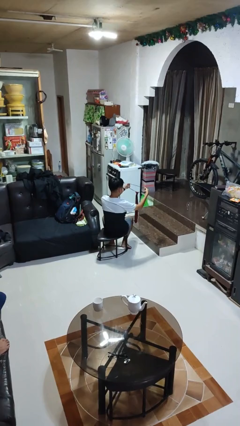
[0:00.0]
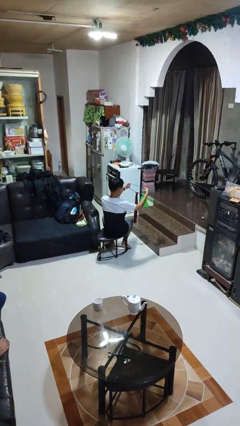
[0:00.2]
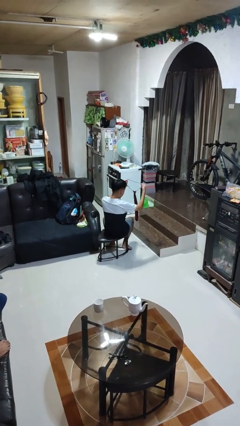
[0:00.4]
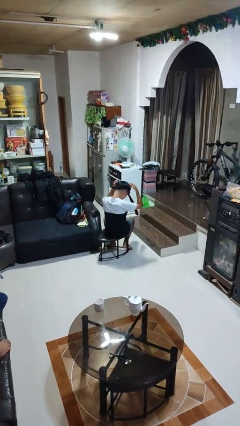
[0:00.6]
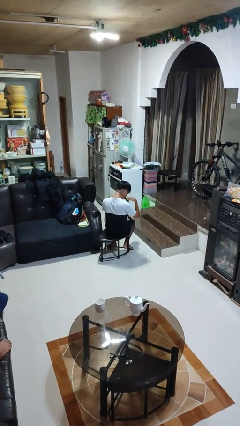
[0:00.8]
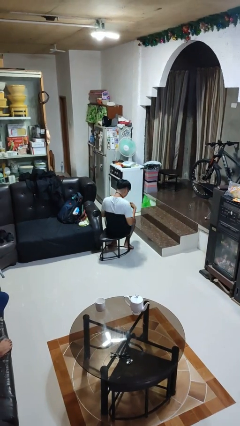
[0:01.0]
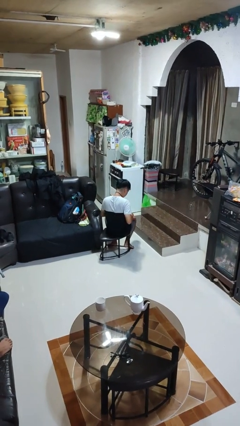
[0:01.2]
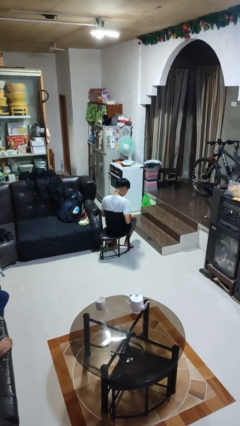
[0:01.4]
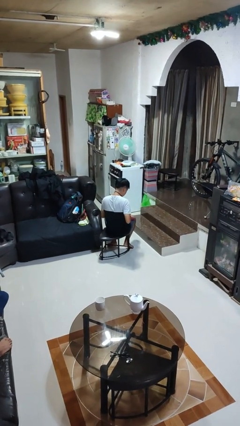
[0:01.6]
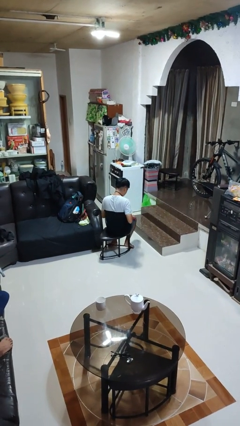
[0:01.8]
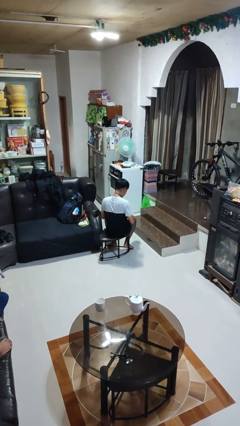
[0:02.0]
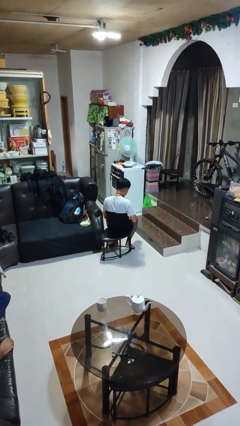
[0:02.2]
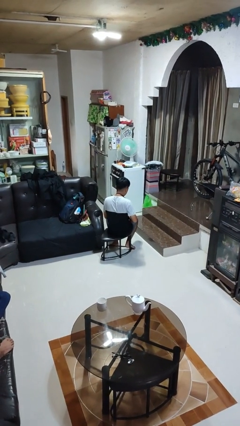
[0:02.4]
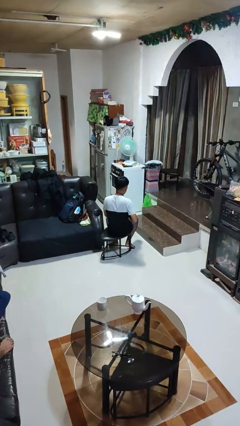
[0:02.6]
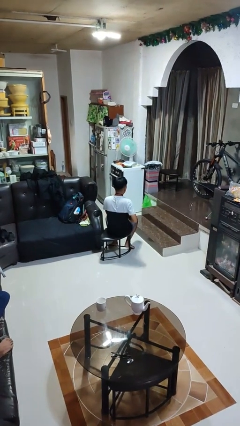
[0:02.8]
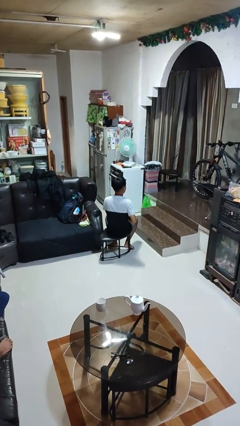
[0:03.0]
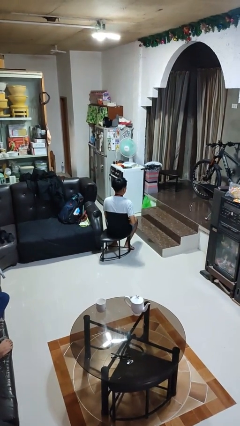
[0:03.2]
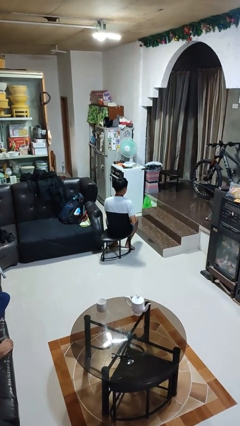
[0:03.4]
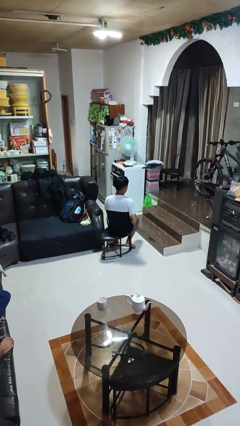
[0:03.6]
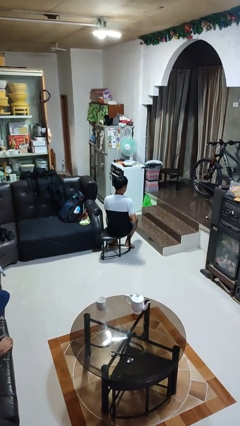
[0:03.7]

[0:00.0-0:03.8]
person puts on necktie

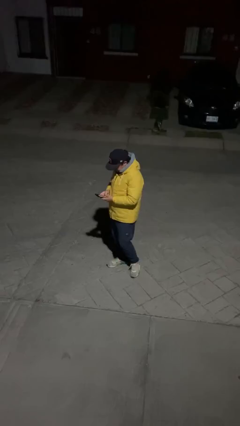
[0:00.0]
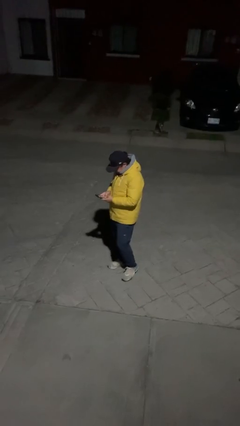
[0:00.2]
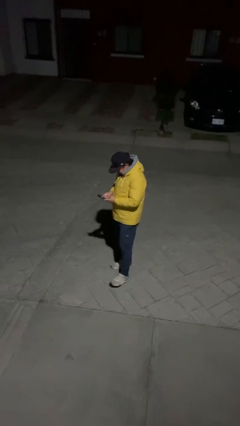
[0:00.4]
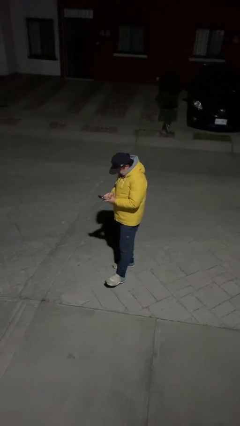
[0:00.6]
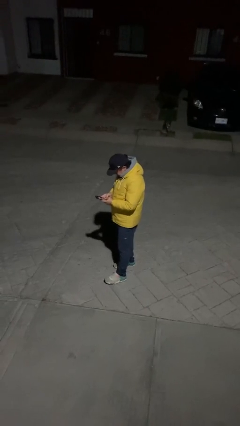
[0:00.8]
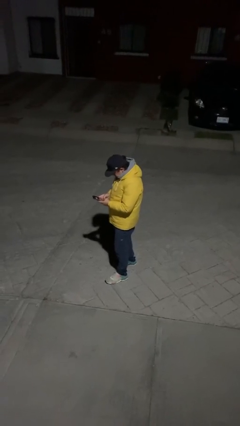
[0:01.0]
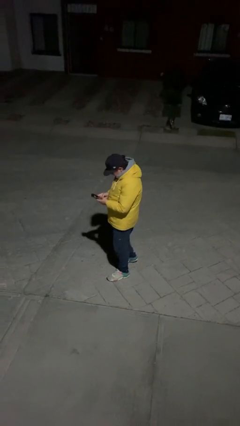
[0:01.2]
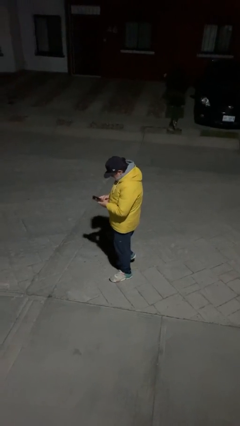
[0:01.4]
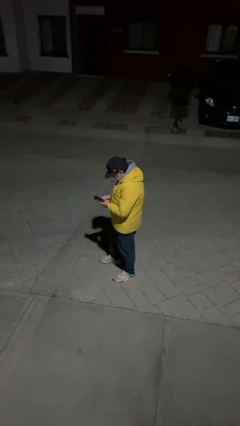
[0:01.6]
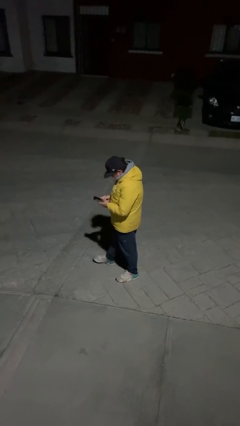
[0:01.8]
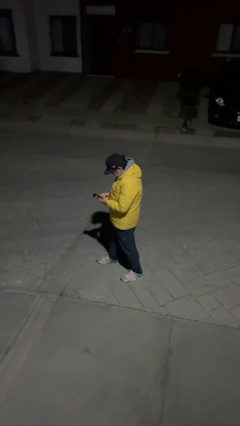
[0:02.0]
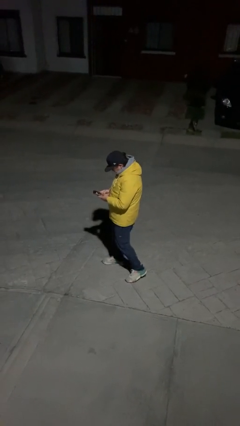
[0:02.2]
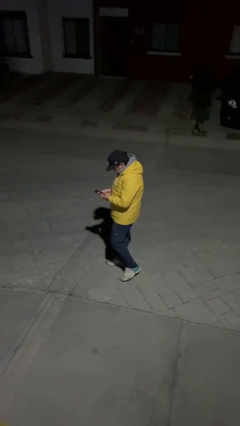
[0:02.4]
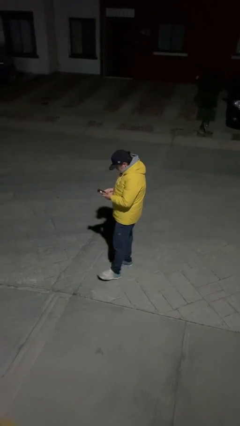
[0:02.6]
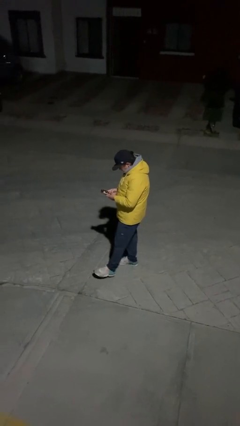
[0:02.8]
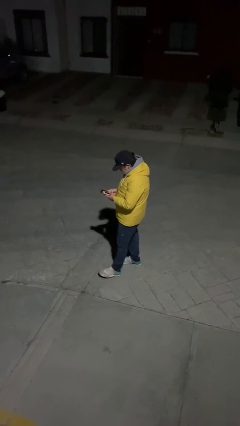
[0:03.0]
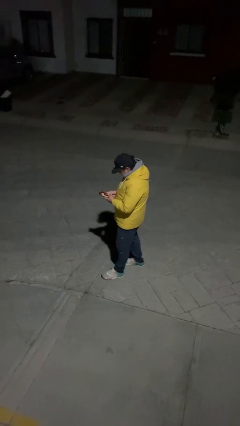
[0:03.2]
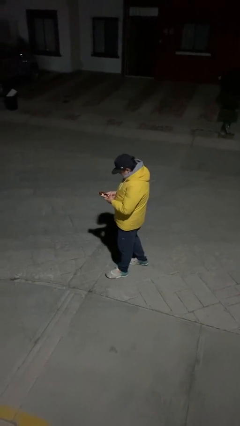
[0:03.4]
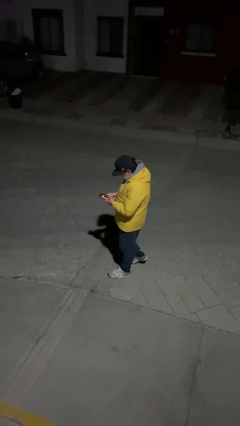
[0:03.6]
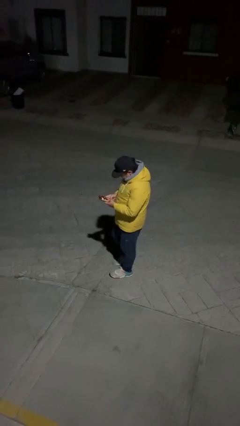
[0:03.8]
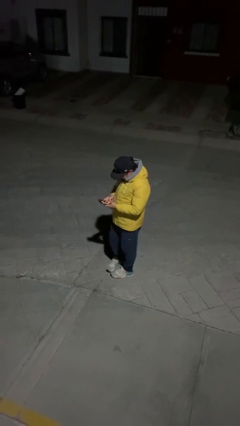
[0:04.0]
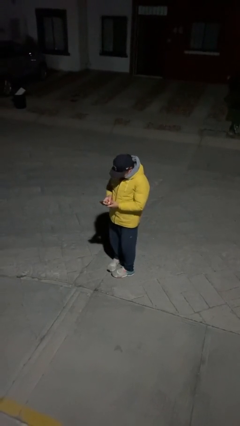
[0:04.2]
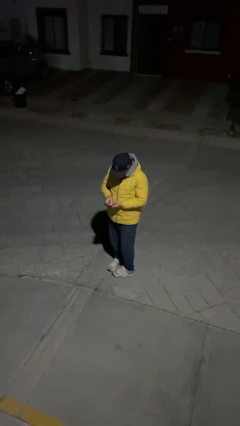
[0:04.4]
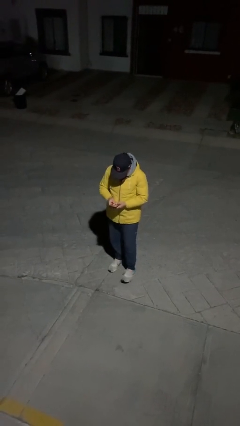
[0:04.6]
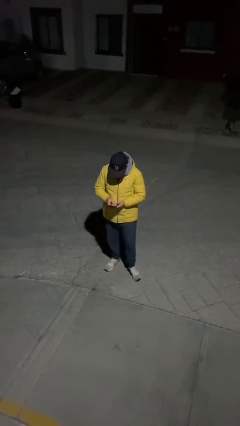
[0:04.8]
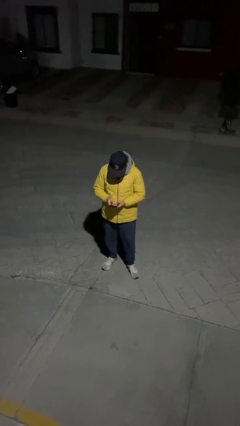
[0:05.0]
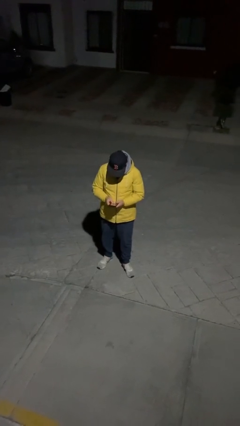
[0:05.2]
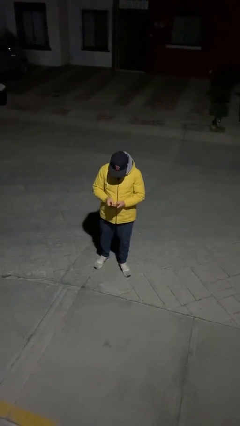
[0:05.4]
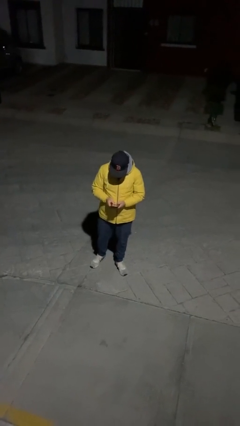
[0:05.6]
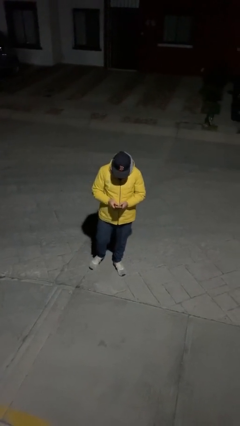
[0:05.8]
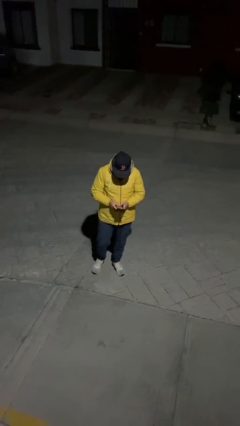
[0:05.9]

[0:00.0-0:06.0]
person texts on phone

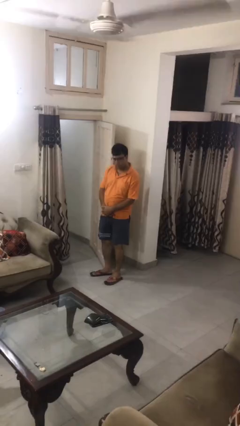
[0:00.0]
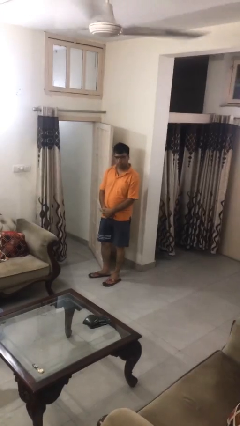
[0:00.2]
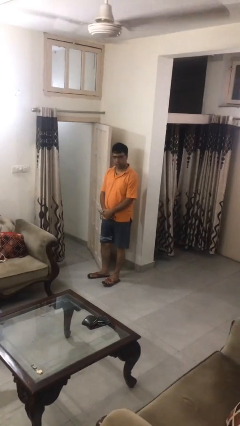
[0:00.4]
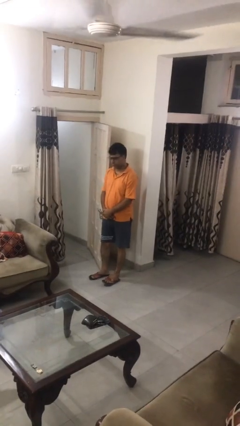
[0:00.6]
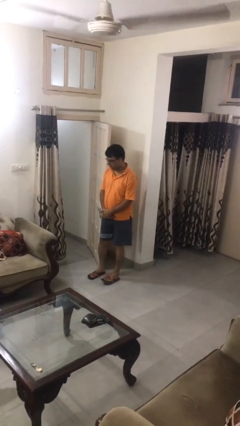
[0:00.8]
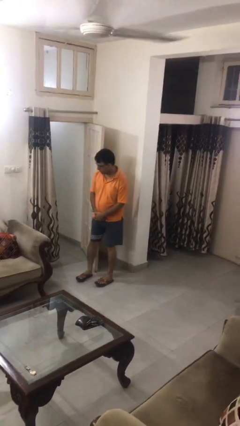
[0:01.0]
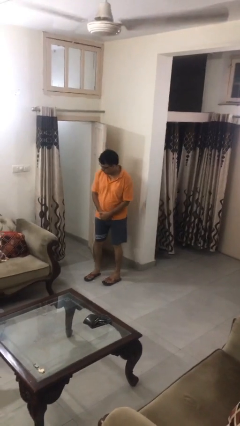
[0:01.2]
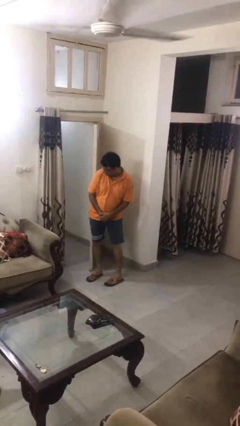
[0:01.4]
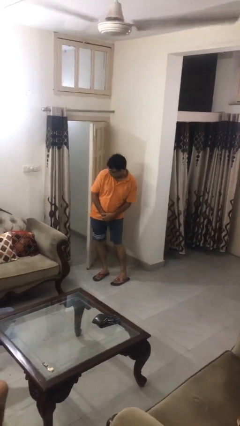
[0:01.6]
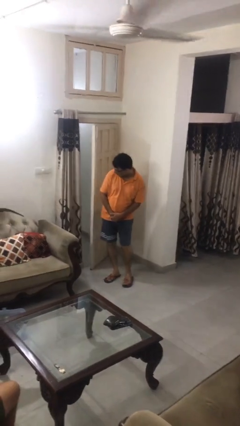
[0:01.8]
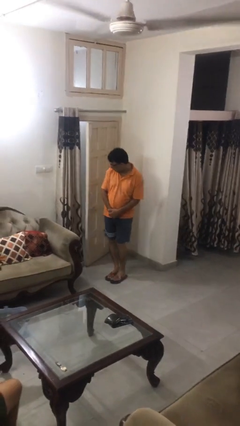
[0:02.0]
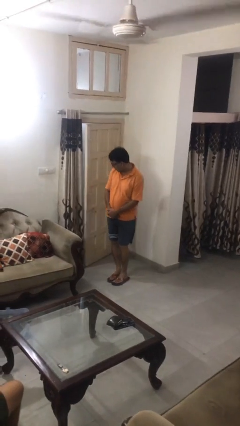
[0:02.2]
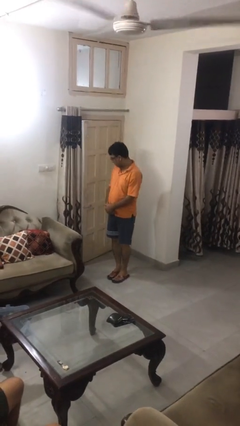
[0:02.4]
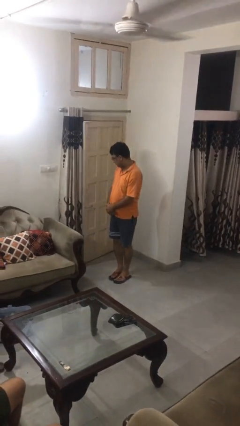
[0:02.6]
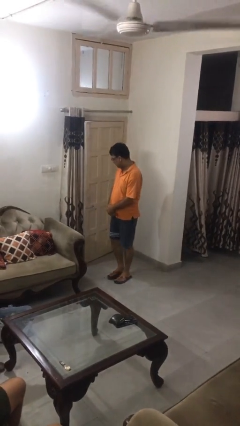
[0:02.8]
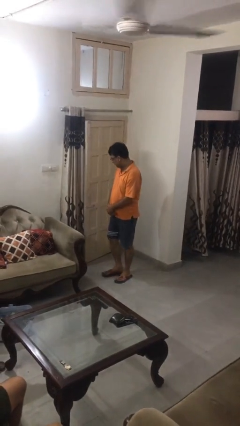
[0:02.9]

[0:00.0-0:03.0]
person closes door with hip

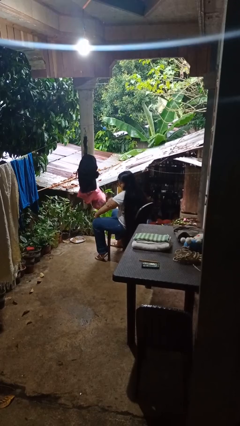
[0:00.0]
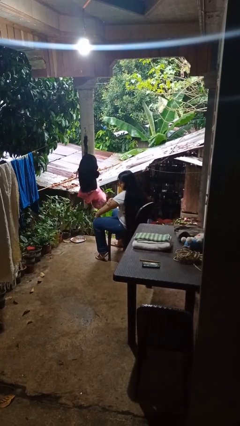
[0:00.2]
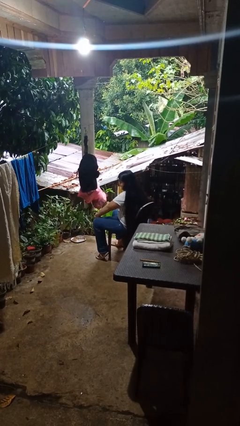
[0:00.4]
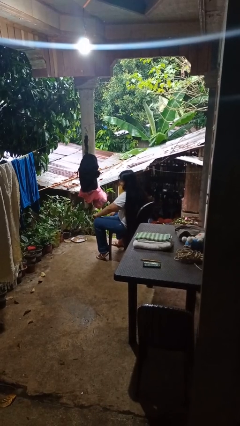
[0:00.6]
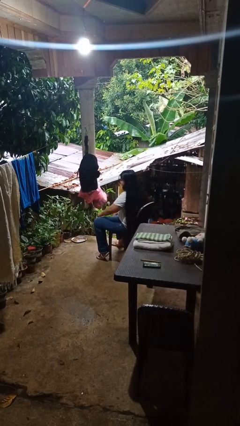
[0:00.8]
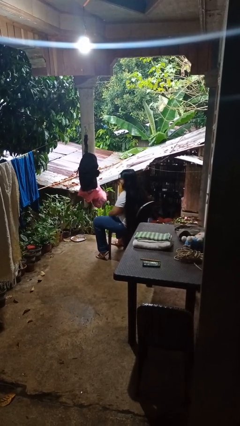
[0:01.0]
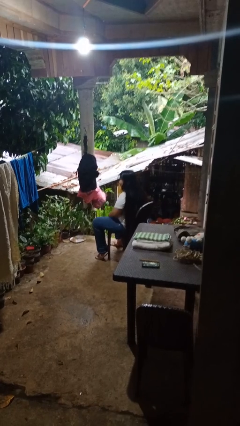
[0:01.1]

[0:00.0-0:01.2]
person swats bug

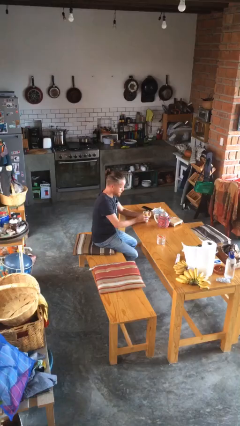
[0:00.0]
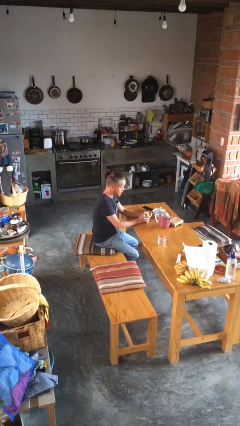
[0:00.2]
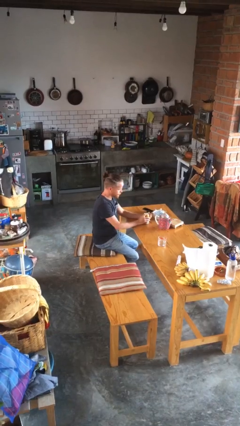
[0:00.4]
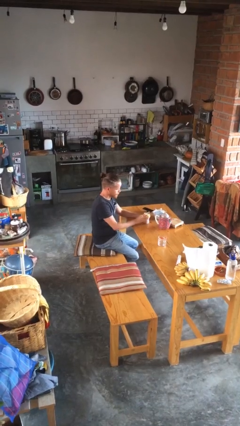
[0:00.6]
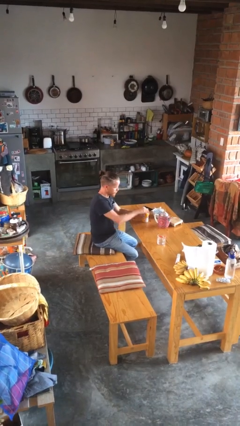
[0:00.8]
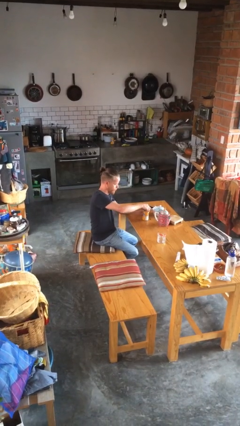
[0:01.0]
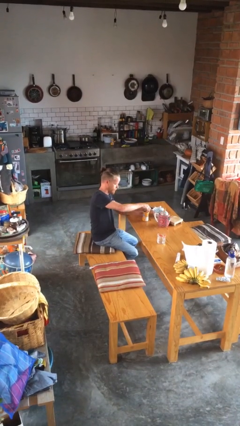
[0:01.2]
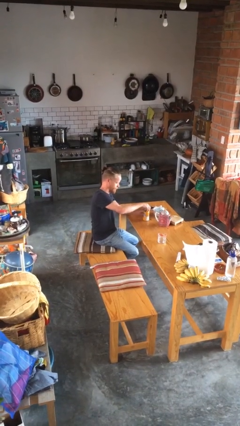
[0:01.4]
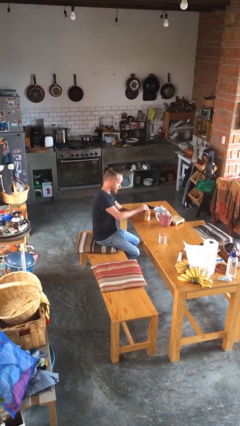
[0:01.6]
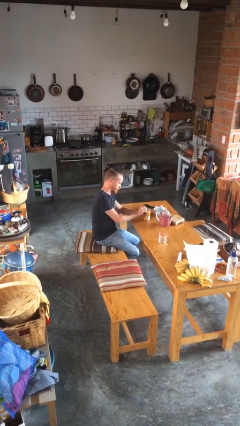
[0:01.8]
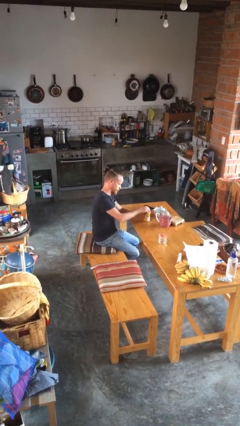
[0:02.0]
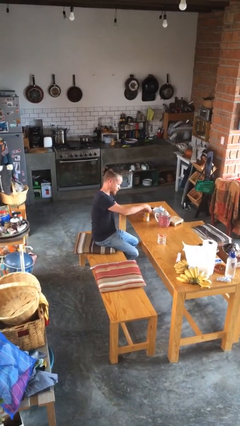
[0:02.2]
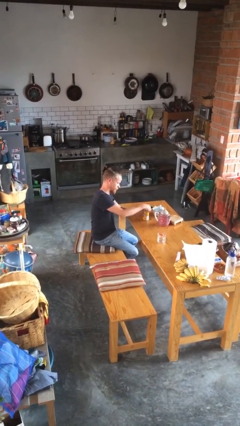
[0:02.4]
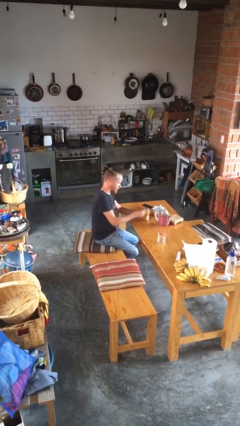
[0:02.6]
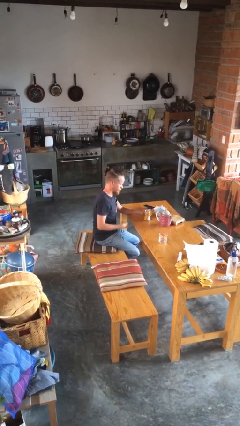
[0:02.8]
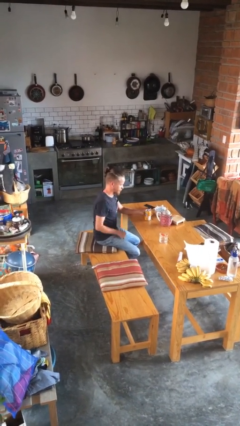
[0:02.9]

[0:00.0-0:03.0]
person opens beverage can

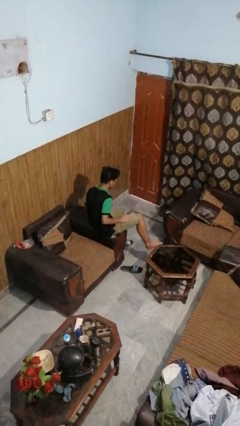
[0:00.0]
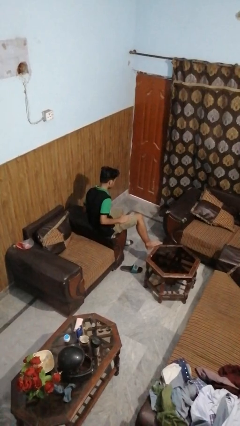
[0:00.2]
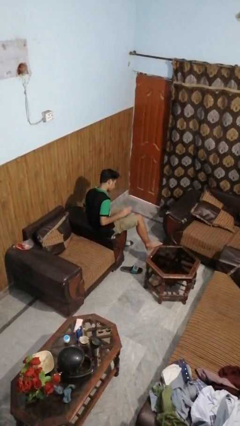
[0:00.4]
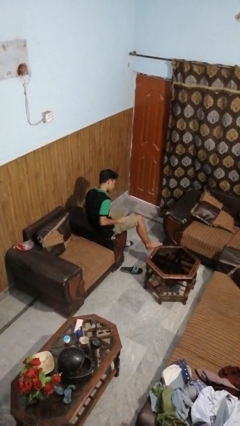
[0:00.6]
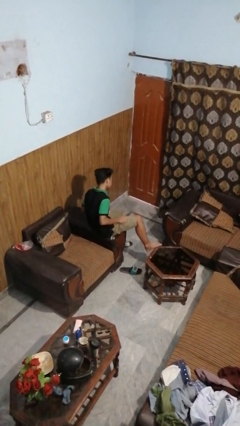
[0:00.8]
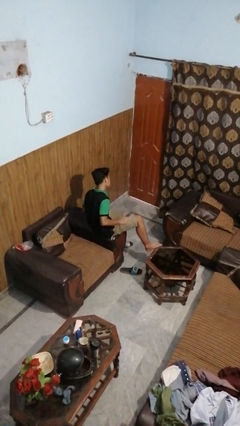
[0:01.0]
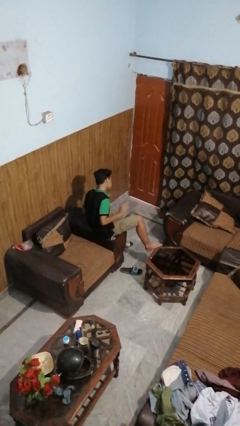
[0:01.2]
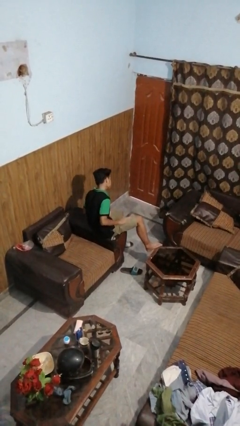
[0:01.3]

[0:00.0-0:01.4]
person slaps hands on thighs
